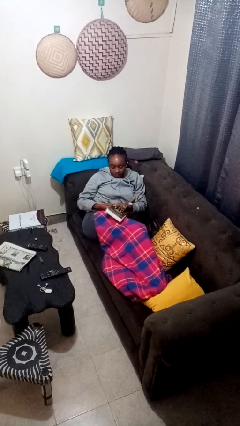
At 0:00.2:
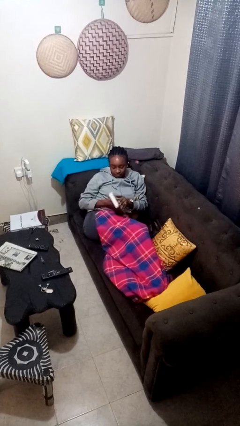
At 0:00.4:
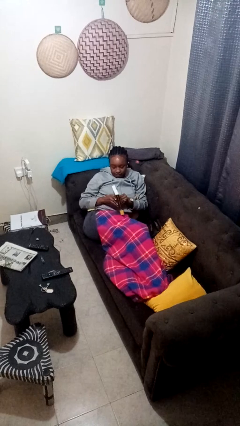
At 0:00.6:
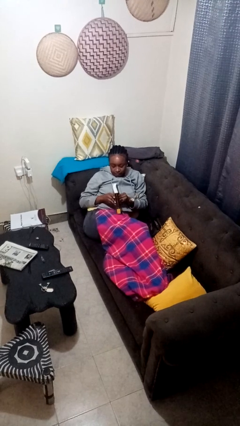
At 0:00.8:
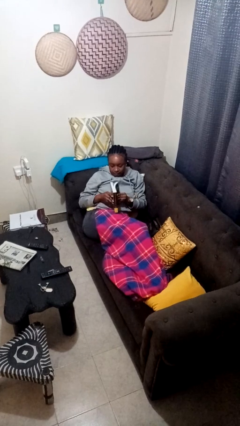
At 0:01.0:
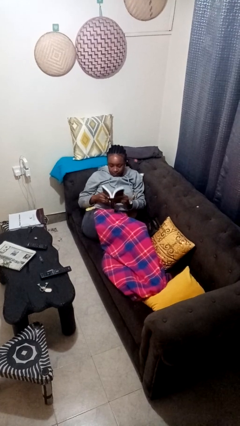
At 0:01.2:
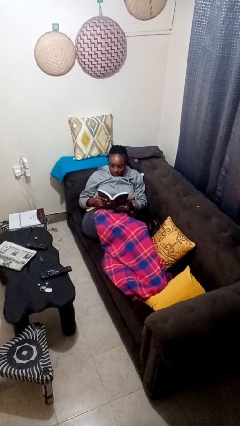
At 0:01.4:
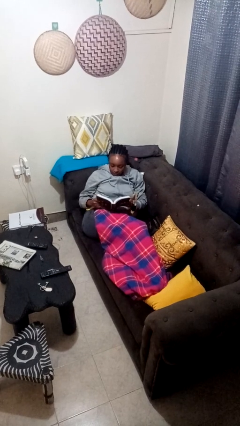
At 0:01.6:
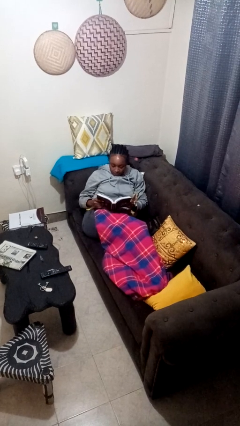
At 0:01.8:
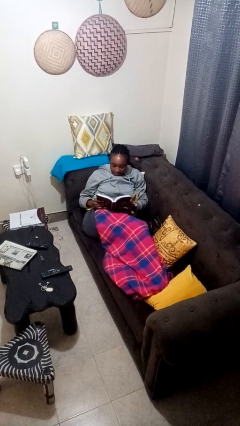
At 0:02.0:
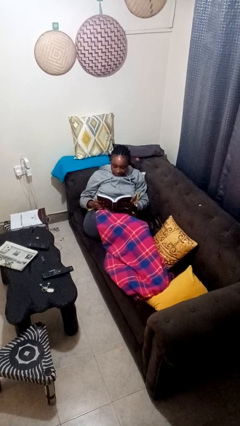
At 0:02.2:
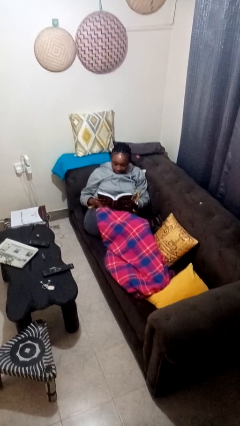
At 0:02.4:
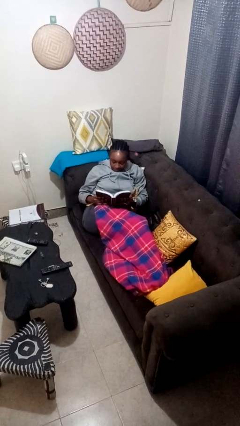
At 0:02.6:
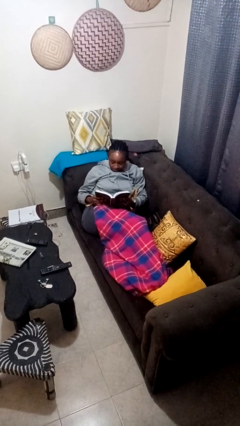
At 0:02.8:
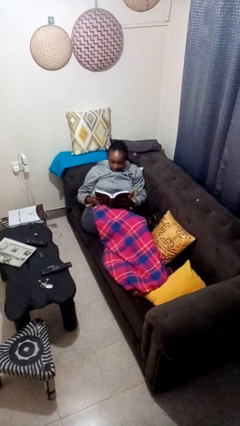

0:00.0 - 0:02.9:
person reads book

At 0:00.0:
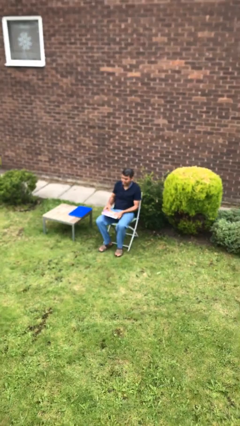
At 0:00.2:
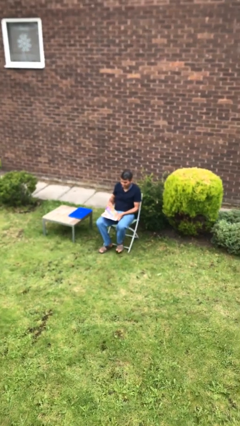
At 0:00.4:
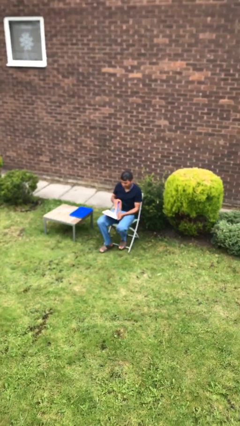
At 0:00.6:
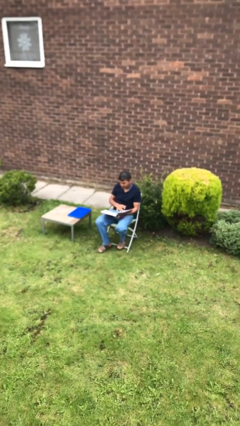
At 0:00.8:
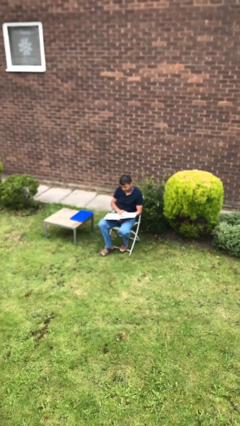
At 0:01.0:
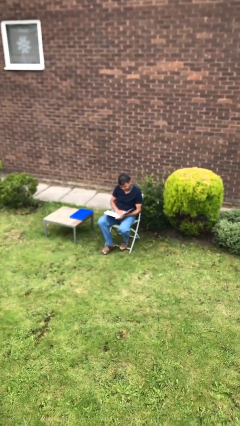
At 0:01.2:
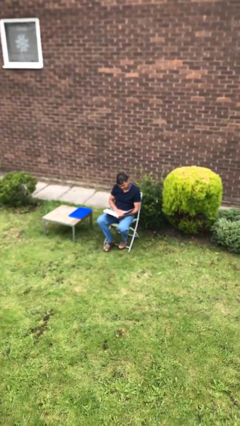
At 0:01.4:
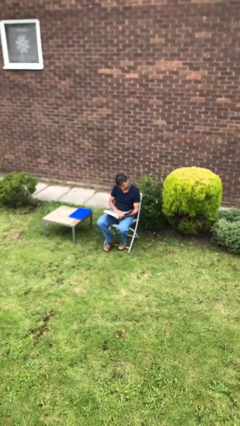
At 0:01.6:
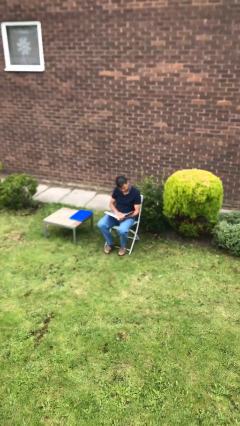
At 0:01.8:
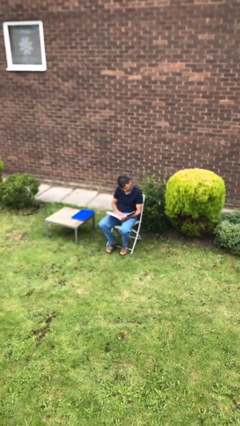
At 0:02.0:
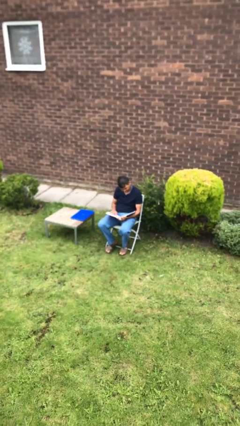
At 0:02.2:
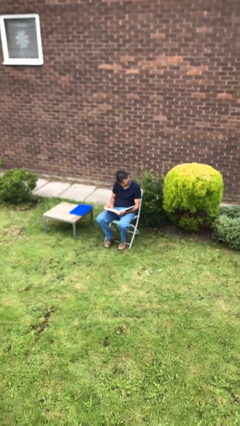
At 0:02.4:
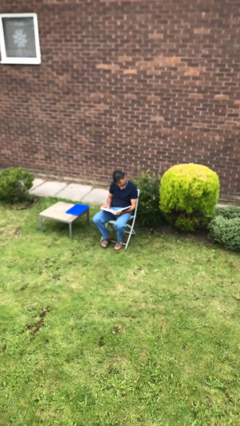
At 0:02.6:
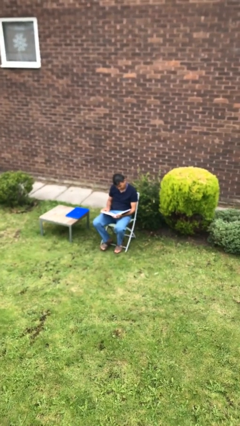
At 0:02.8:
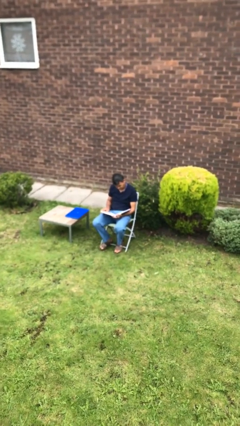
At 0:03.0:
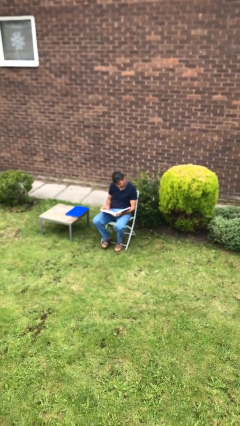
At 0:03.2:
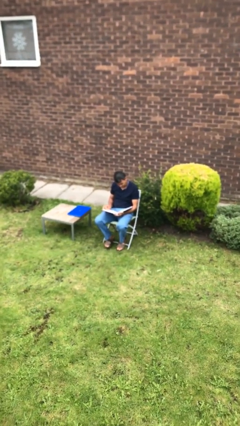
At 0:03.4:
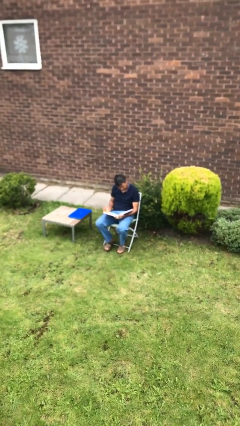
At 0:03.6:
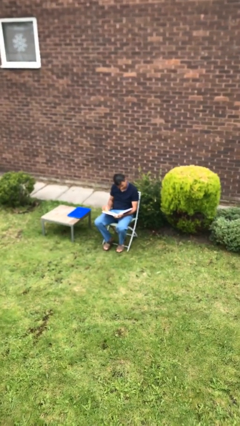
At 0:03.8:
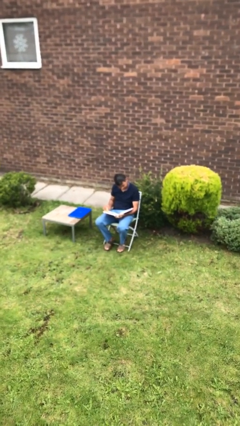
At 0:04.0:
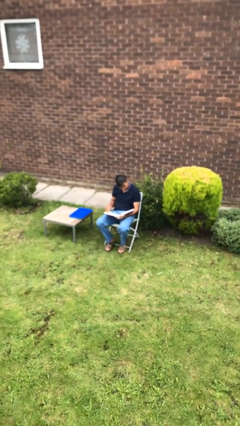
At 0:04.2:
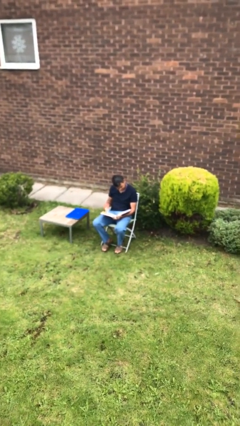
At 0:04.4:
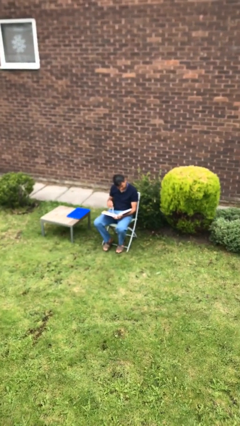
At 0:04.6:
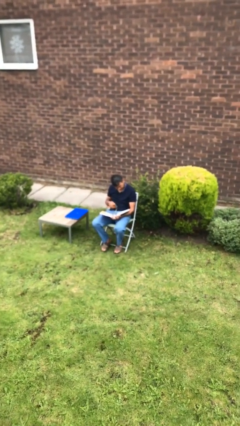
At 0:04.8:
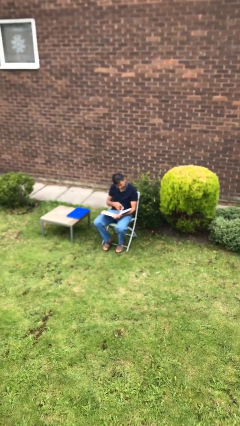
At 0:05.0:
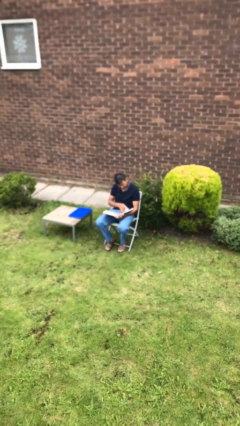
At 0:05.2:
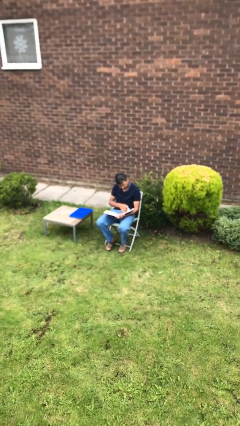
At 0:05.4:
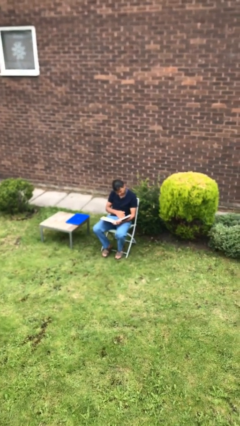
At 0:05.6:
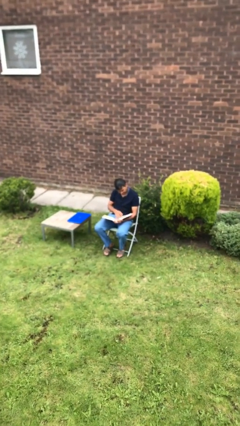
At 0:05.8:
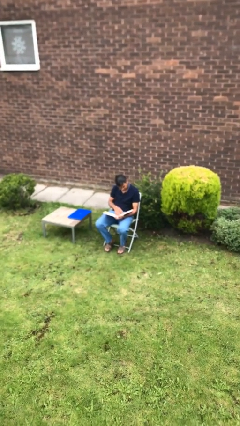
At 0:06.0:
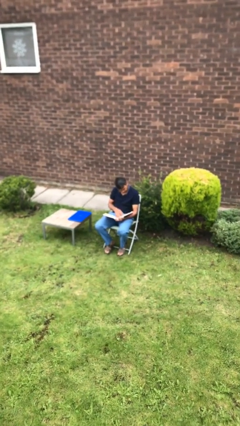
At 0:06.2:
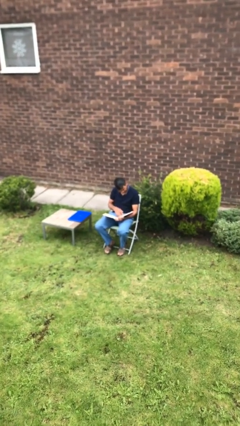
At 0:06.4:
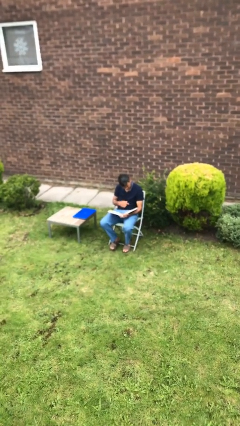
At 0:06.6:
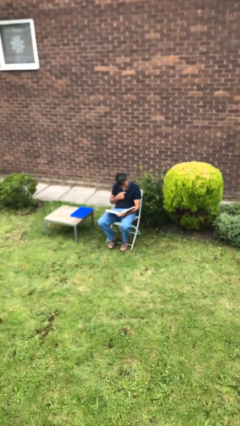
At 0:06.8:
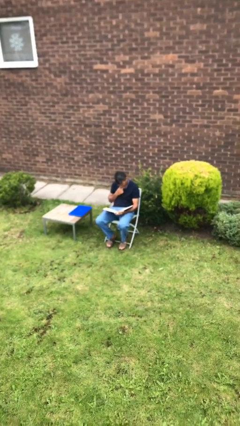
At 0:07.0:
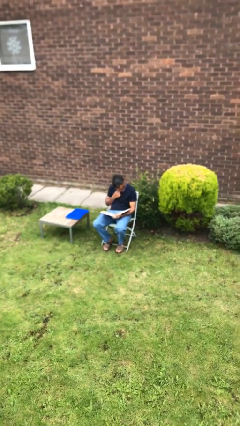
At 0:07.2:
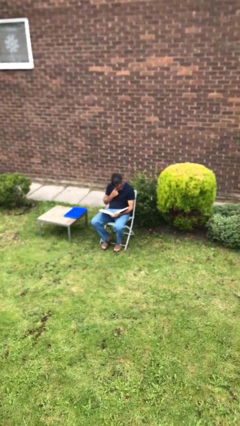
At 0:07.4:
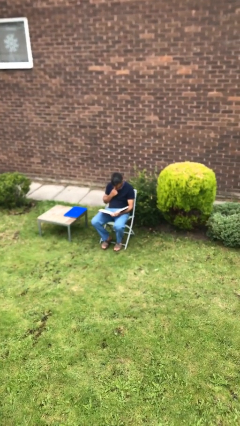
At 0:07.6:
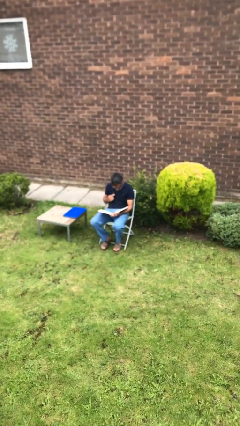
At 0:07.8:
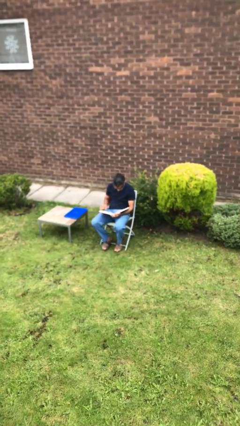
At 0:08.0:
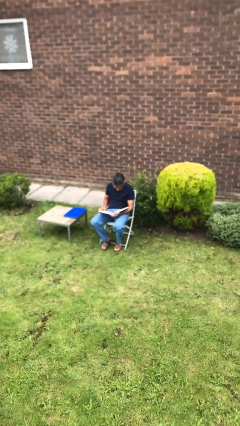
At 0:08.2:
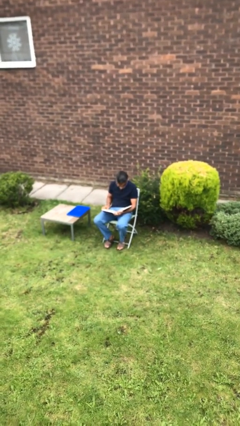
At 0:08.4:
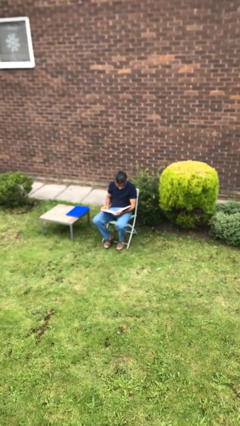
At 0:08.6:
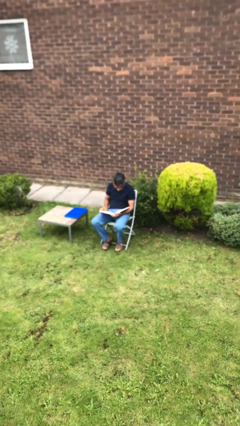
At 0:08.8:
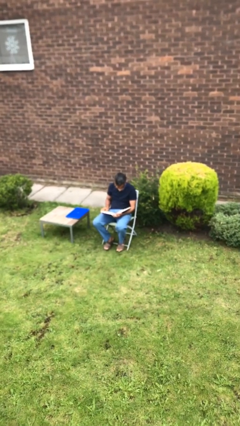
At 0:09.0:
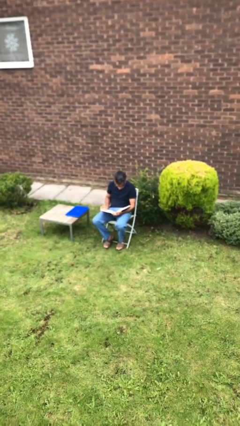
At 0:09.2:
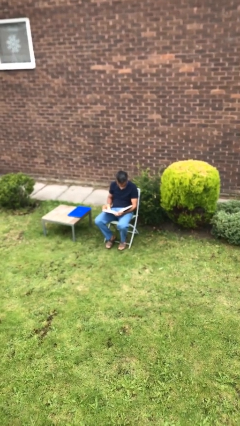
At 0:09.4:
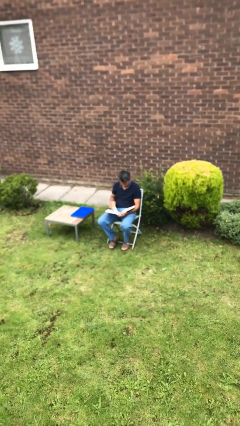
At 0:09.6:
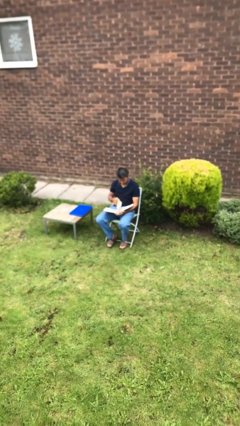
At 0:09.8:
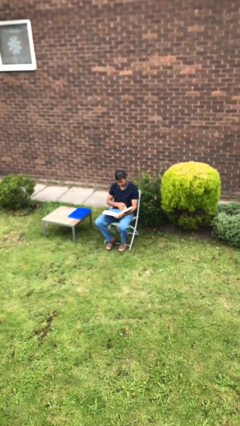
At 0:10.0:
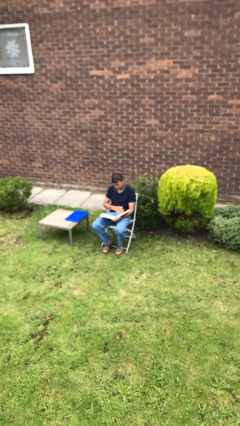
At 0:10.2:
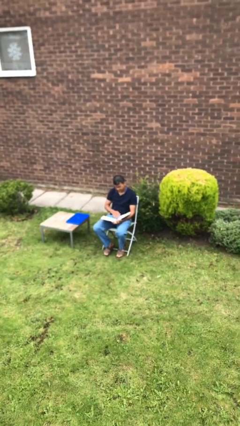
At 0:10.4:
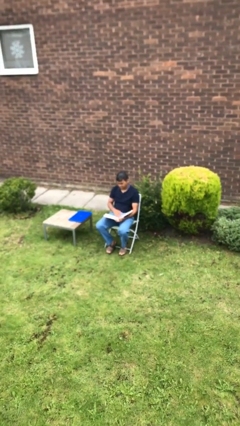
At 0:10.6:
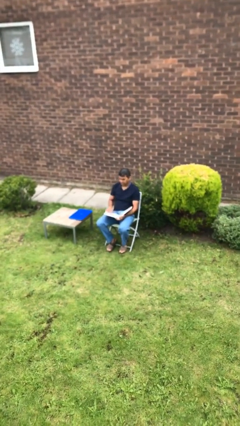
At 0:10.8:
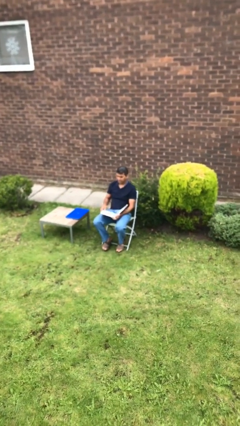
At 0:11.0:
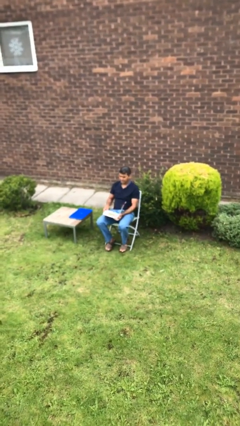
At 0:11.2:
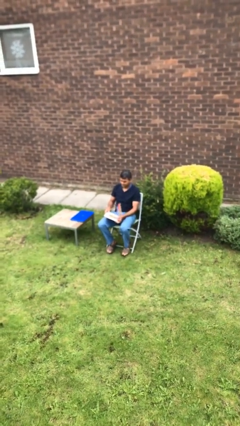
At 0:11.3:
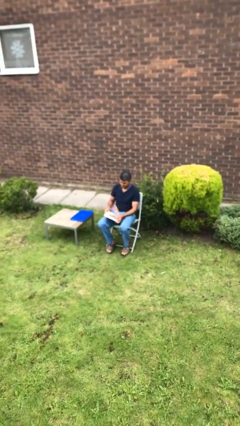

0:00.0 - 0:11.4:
person reads document

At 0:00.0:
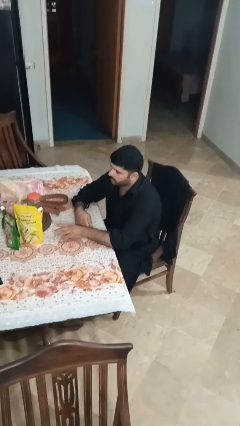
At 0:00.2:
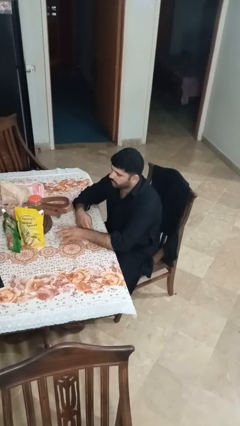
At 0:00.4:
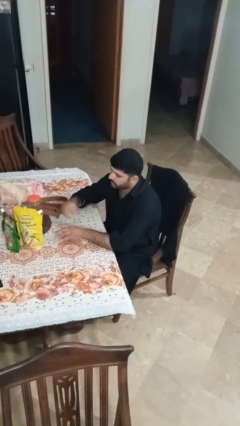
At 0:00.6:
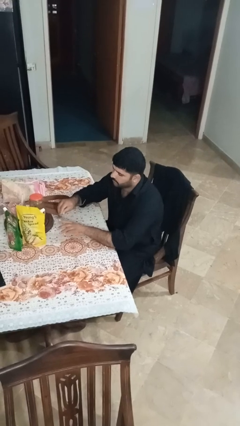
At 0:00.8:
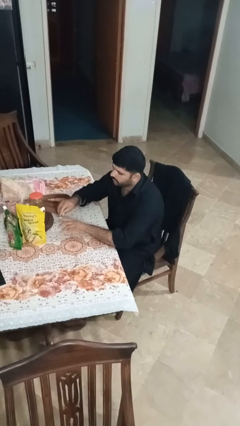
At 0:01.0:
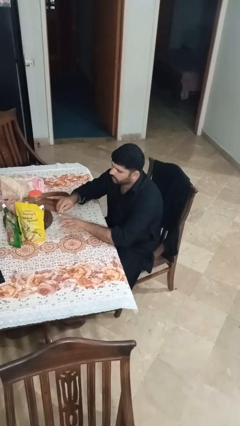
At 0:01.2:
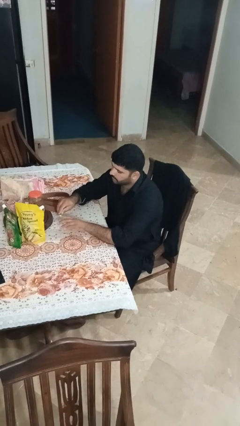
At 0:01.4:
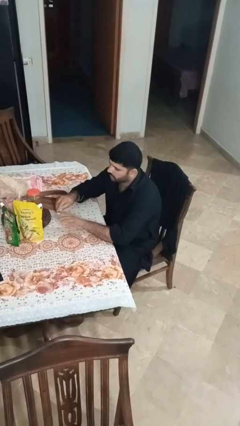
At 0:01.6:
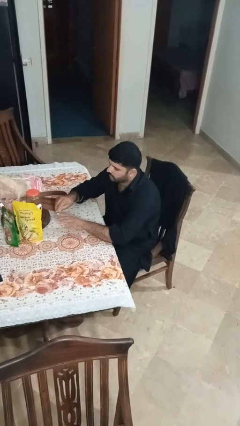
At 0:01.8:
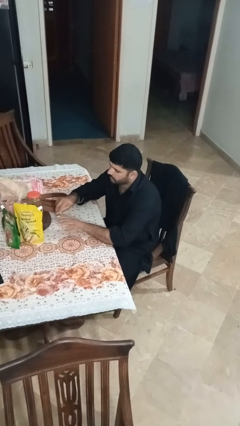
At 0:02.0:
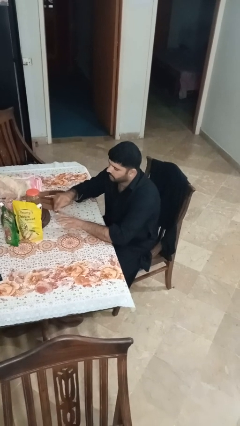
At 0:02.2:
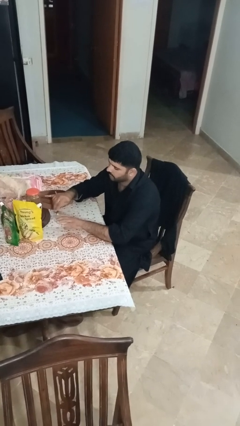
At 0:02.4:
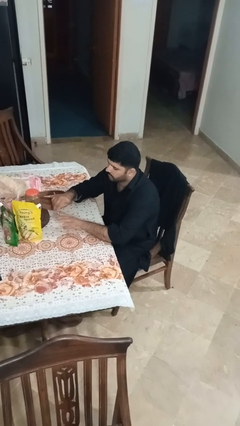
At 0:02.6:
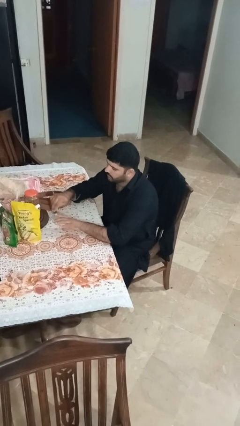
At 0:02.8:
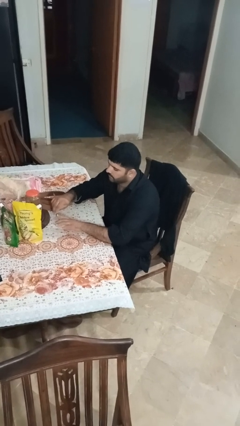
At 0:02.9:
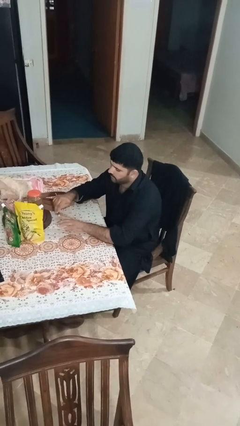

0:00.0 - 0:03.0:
person files fingernails

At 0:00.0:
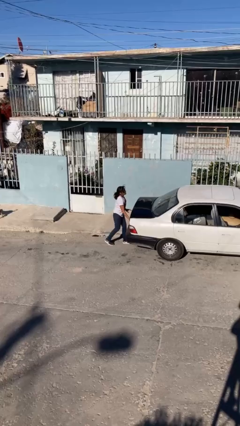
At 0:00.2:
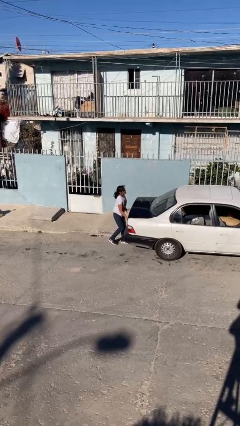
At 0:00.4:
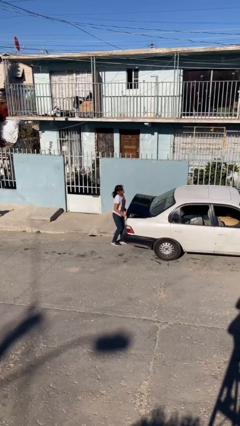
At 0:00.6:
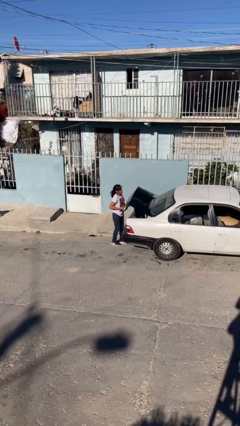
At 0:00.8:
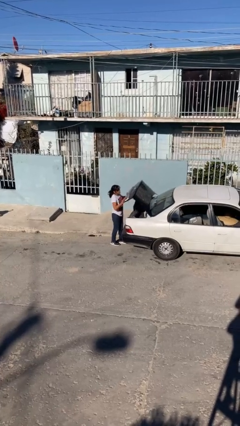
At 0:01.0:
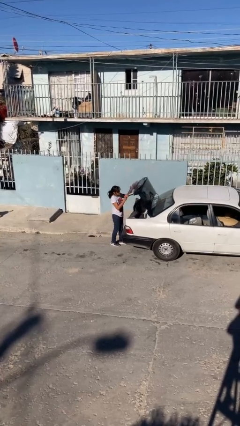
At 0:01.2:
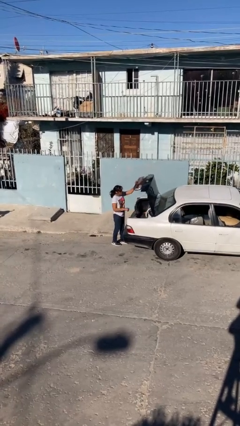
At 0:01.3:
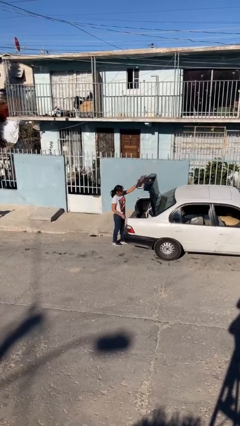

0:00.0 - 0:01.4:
person opens car trunk
